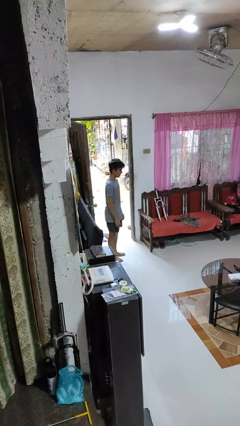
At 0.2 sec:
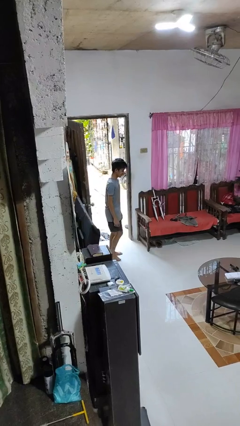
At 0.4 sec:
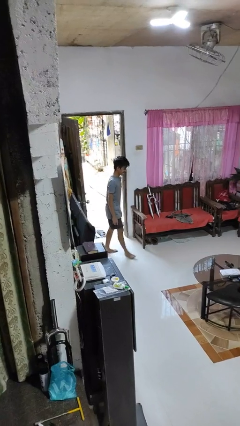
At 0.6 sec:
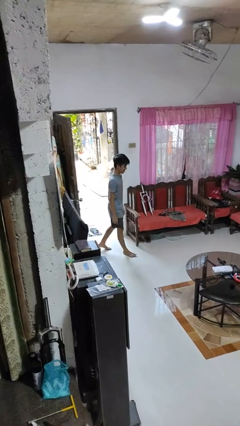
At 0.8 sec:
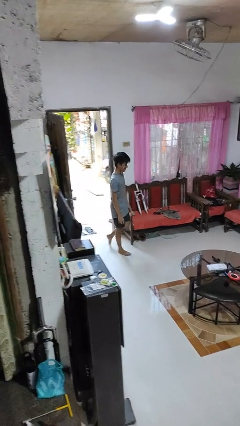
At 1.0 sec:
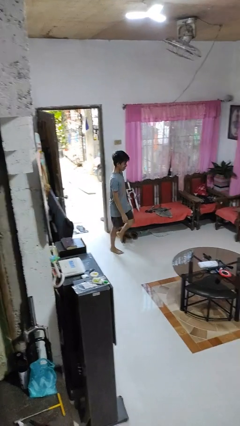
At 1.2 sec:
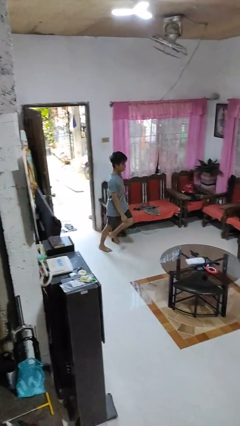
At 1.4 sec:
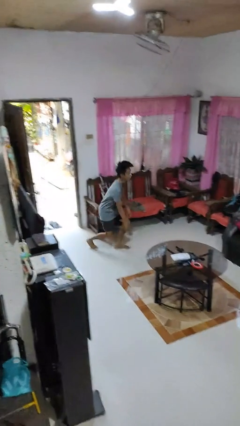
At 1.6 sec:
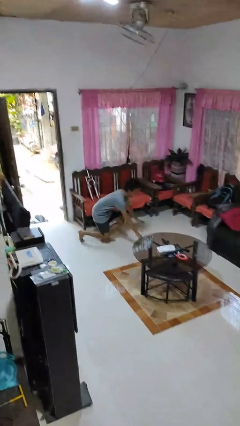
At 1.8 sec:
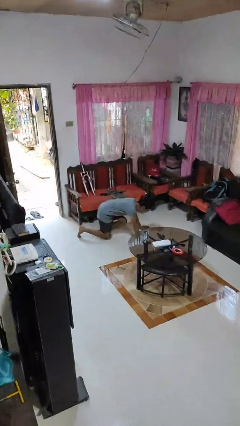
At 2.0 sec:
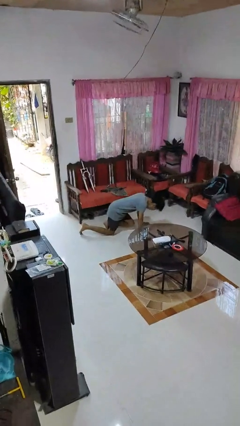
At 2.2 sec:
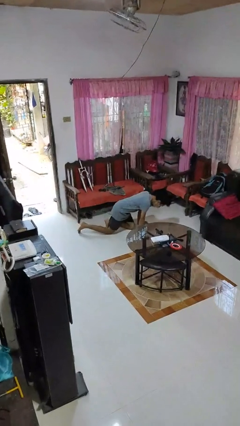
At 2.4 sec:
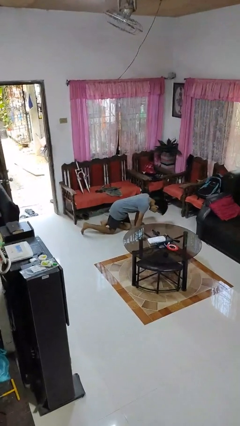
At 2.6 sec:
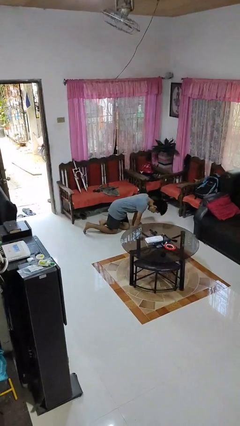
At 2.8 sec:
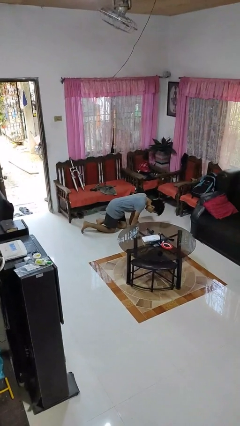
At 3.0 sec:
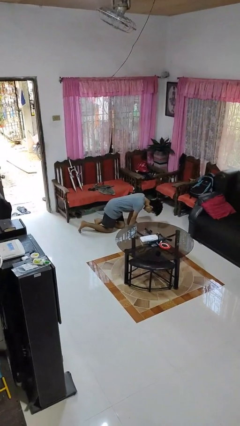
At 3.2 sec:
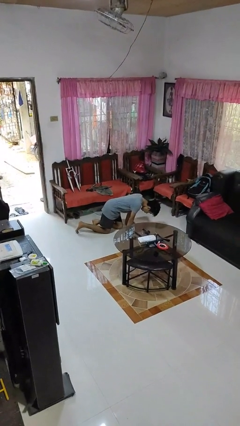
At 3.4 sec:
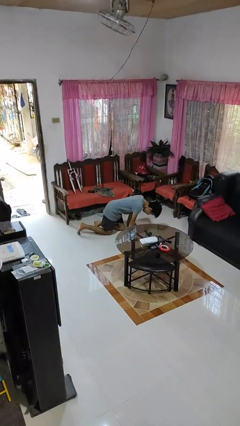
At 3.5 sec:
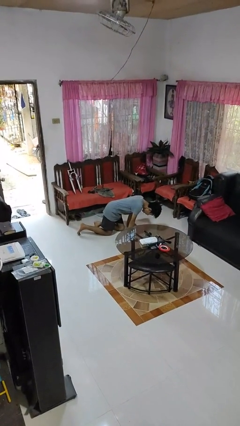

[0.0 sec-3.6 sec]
person trips on object on floor

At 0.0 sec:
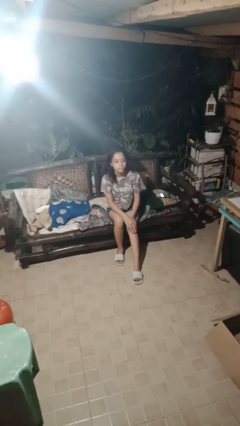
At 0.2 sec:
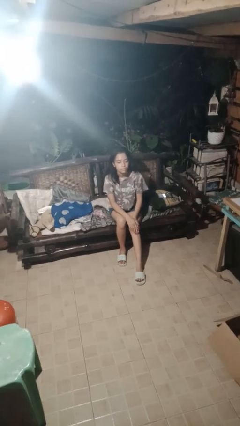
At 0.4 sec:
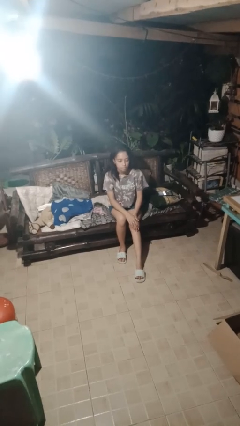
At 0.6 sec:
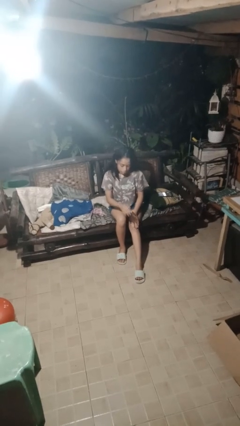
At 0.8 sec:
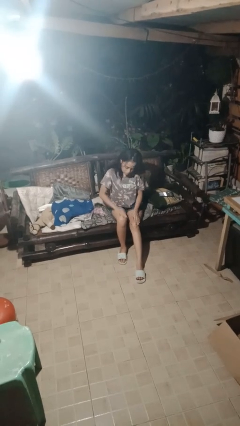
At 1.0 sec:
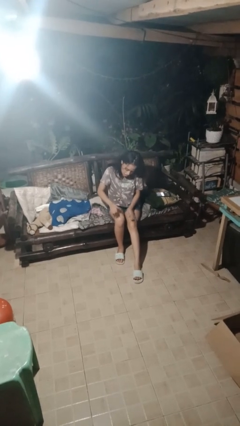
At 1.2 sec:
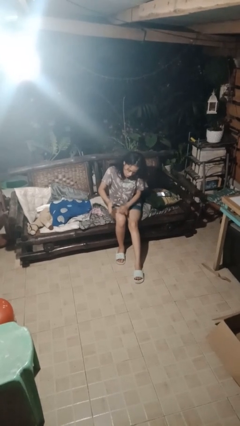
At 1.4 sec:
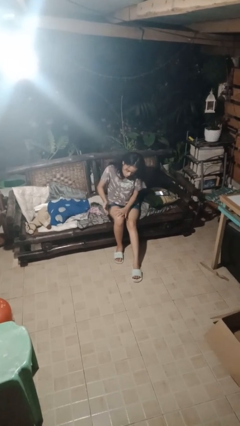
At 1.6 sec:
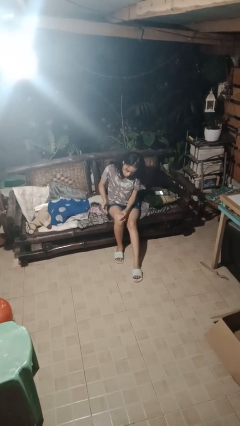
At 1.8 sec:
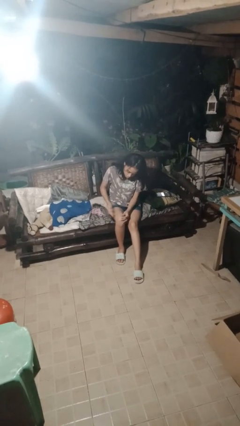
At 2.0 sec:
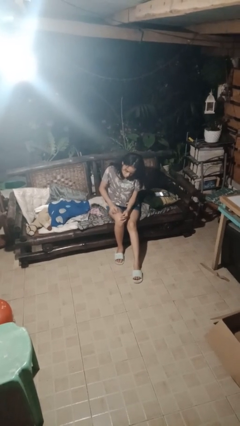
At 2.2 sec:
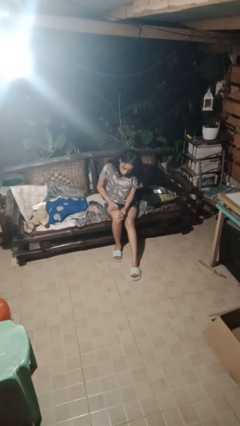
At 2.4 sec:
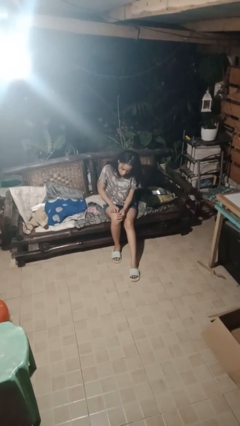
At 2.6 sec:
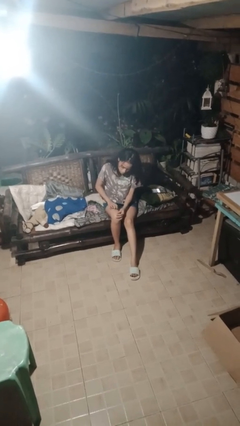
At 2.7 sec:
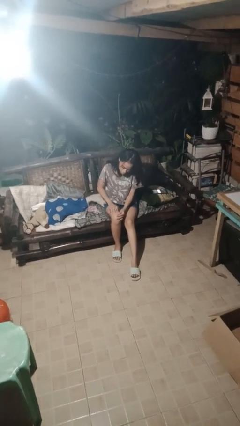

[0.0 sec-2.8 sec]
person swats bug

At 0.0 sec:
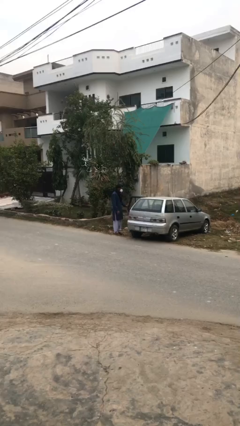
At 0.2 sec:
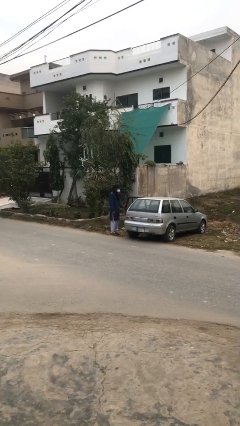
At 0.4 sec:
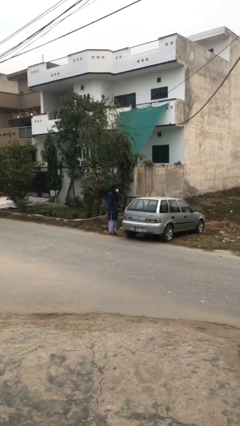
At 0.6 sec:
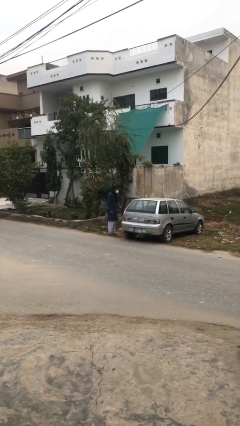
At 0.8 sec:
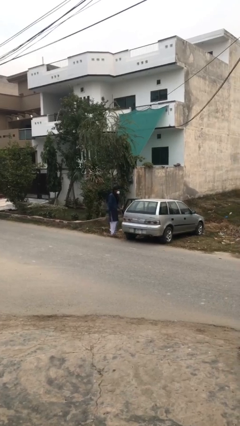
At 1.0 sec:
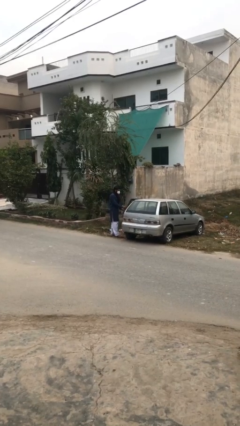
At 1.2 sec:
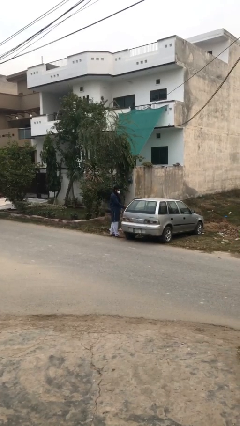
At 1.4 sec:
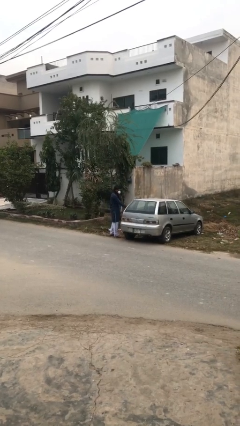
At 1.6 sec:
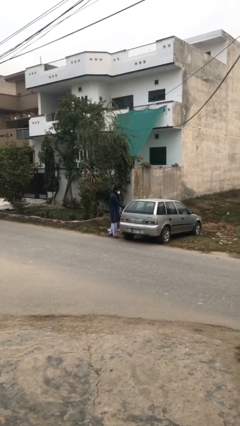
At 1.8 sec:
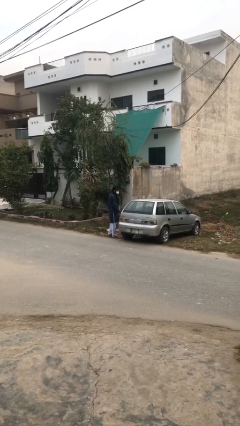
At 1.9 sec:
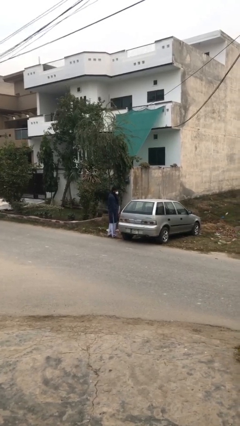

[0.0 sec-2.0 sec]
person closes car door

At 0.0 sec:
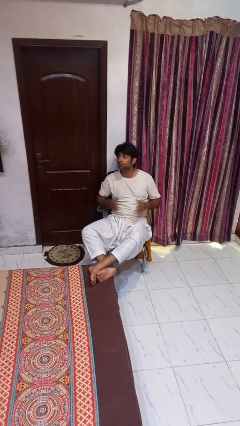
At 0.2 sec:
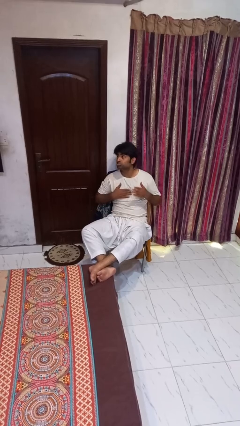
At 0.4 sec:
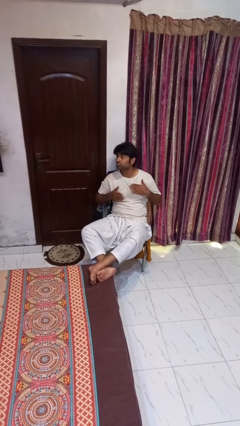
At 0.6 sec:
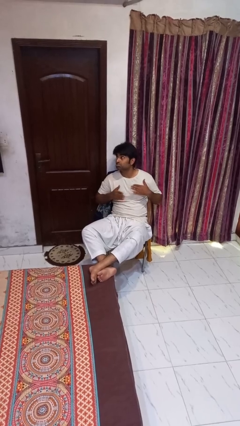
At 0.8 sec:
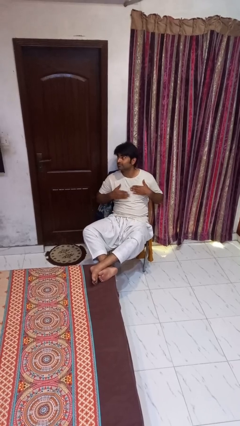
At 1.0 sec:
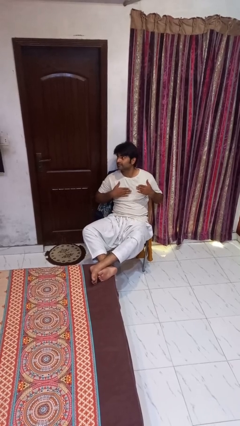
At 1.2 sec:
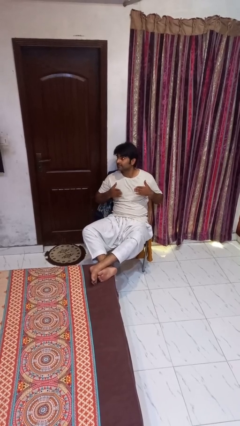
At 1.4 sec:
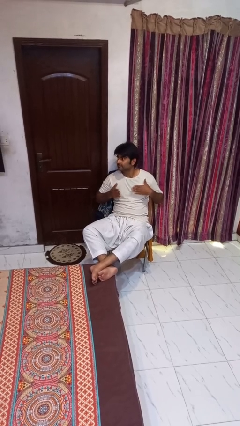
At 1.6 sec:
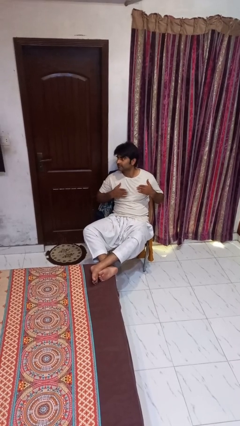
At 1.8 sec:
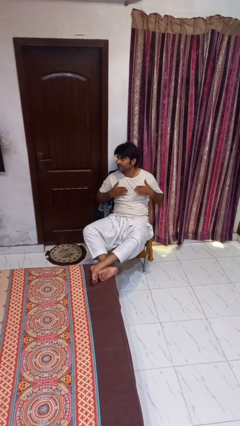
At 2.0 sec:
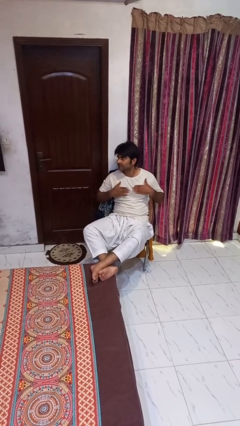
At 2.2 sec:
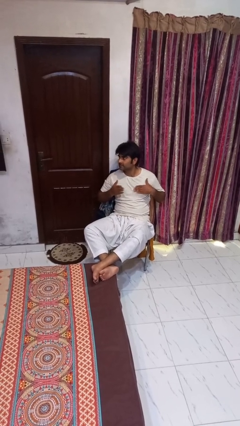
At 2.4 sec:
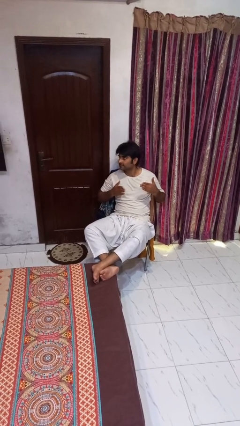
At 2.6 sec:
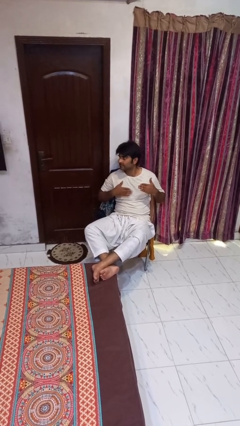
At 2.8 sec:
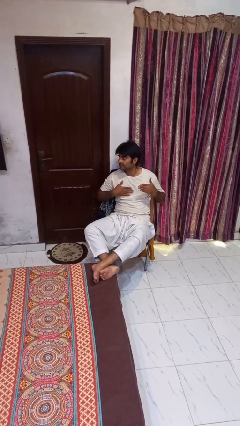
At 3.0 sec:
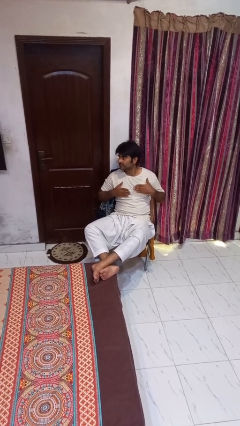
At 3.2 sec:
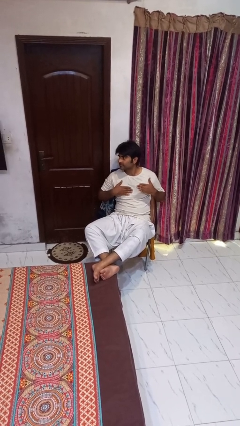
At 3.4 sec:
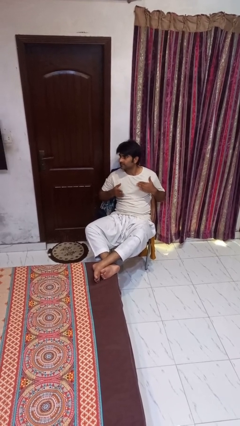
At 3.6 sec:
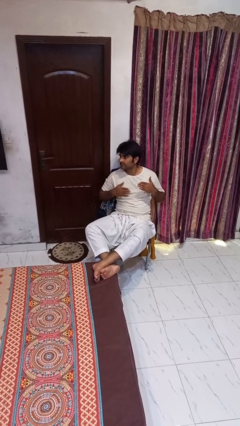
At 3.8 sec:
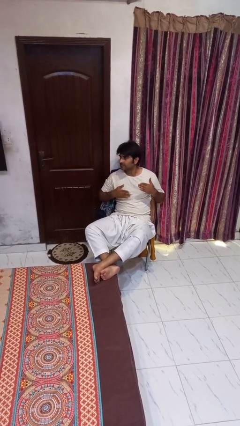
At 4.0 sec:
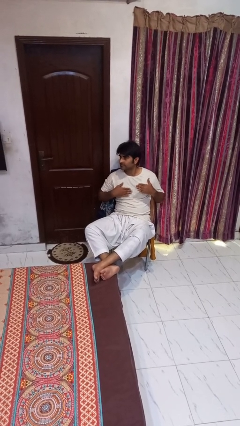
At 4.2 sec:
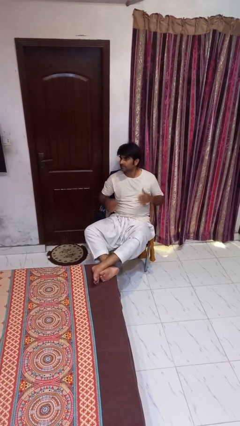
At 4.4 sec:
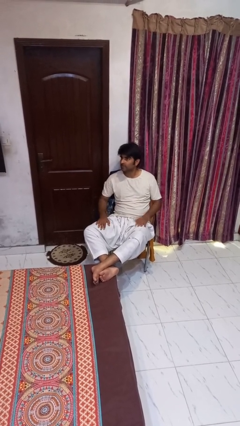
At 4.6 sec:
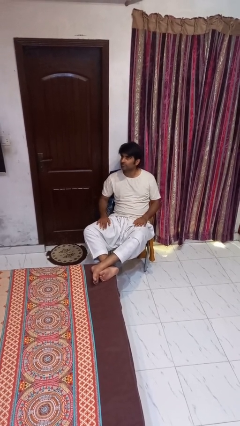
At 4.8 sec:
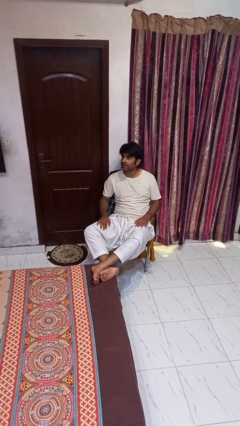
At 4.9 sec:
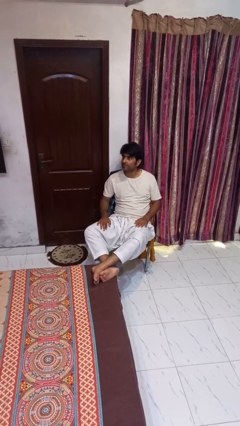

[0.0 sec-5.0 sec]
person drums on chest

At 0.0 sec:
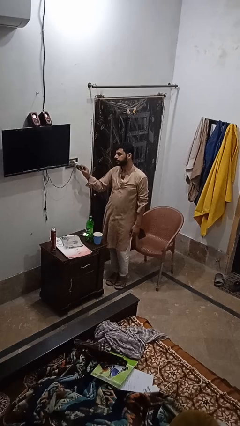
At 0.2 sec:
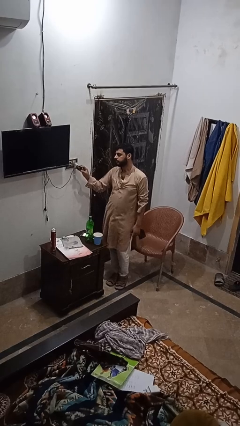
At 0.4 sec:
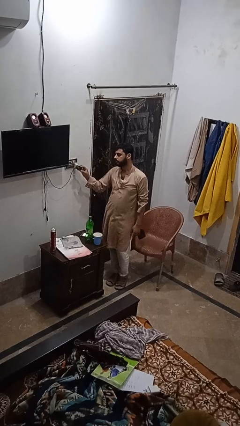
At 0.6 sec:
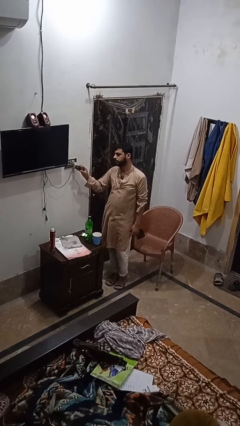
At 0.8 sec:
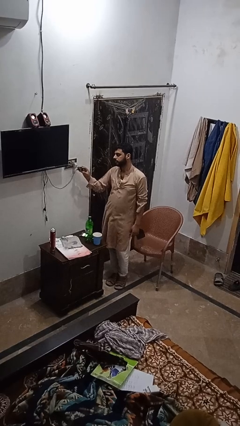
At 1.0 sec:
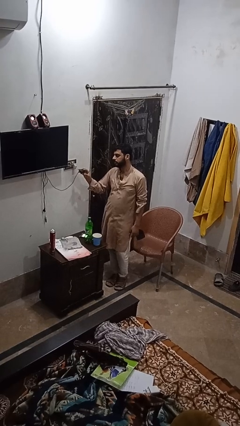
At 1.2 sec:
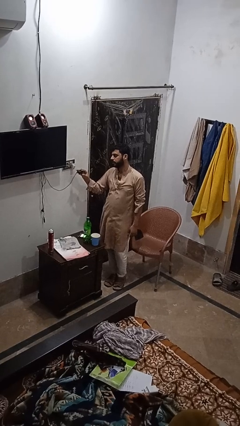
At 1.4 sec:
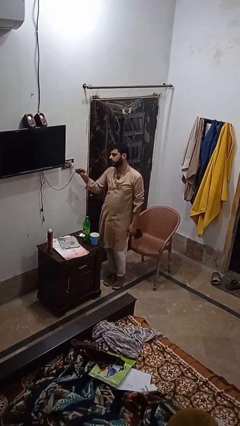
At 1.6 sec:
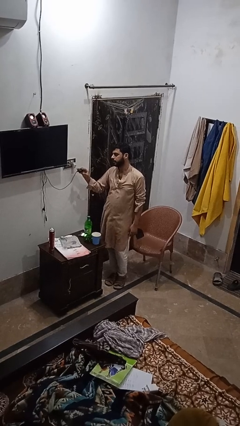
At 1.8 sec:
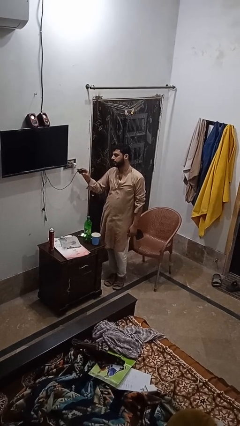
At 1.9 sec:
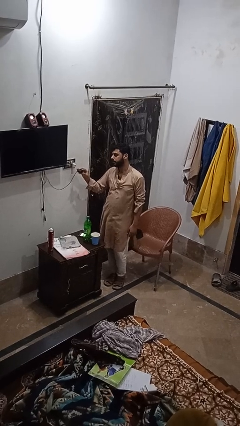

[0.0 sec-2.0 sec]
person unplugs from electrical socket

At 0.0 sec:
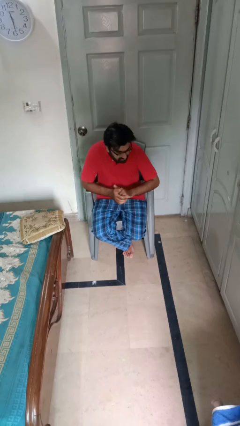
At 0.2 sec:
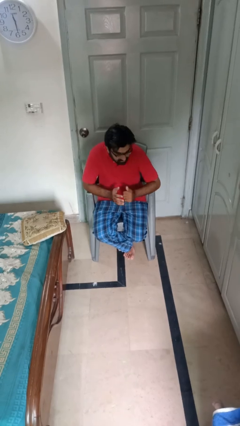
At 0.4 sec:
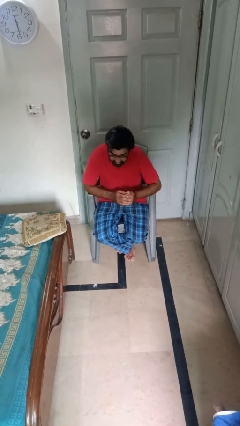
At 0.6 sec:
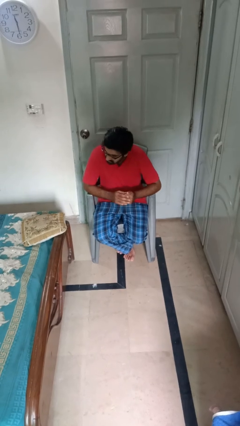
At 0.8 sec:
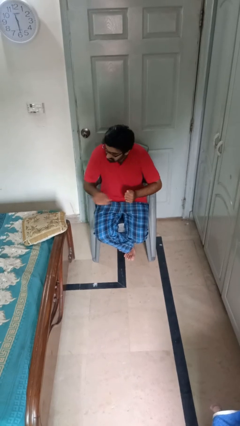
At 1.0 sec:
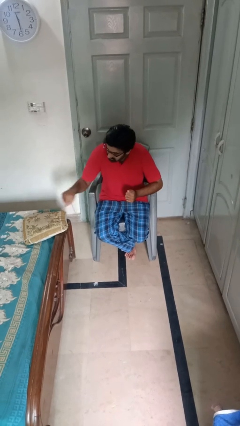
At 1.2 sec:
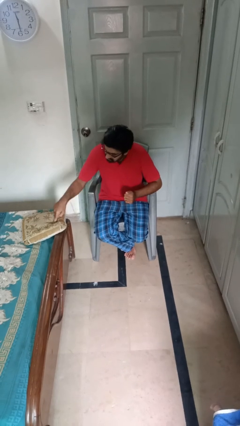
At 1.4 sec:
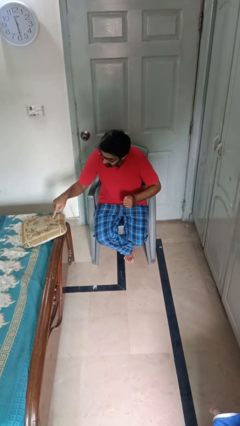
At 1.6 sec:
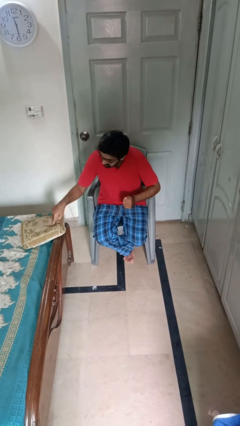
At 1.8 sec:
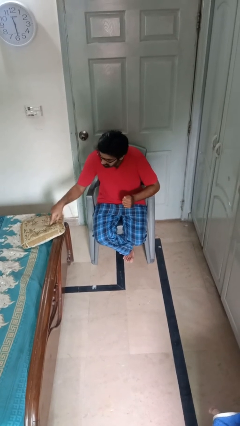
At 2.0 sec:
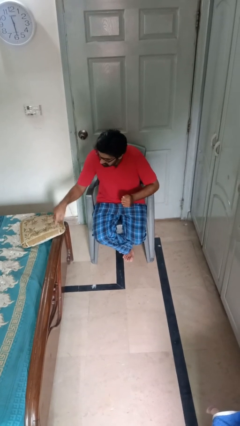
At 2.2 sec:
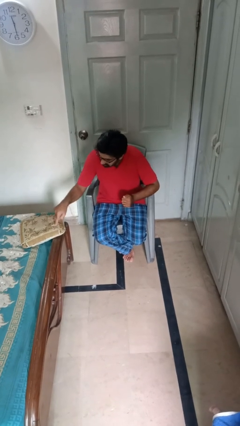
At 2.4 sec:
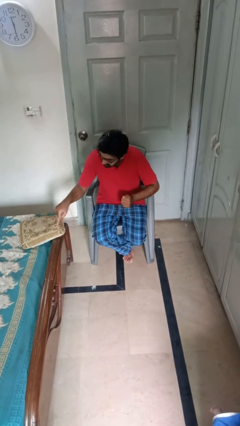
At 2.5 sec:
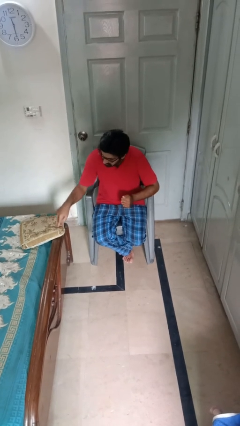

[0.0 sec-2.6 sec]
person taps object with finger
